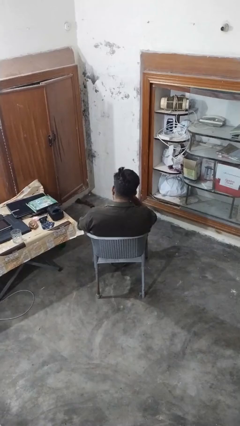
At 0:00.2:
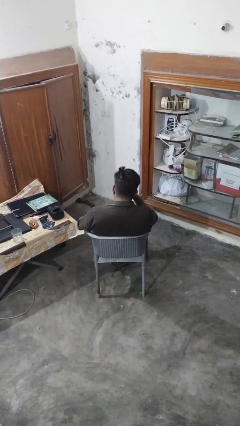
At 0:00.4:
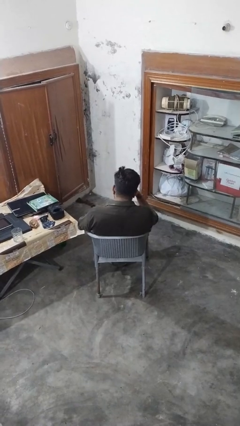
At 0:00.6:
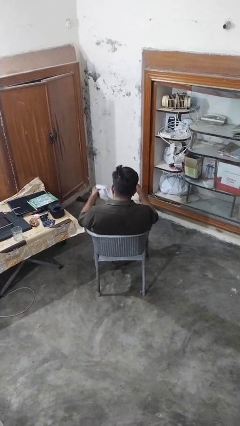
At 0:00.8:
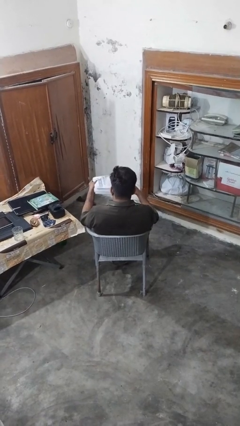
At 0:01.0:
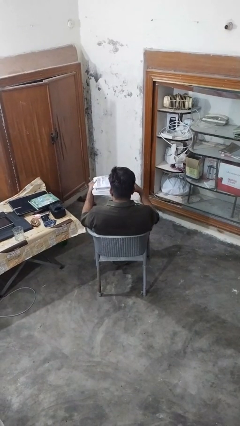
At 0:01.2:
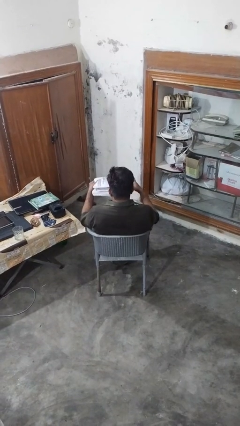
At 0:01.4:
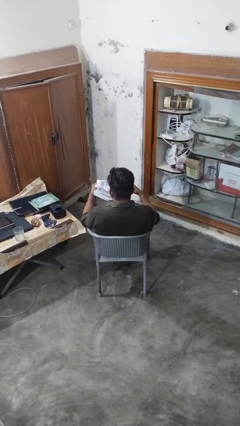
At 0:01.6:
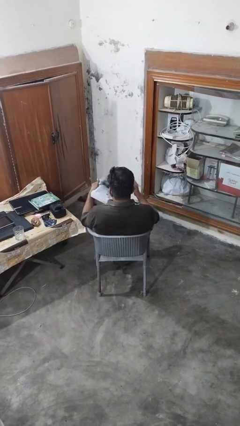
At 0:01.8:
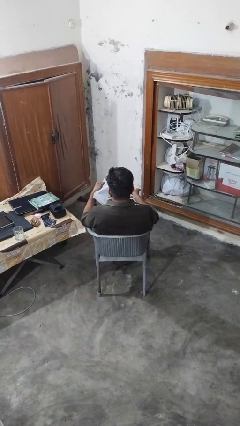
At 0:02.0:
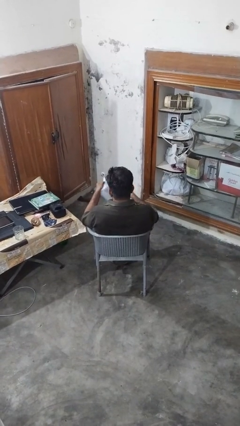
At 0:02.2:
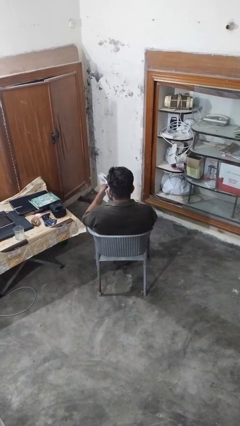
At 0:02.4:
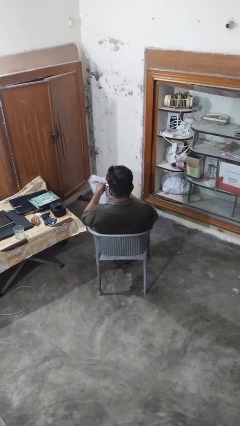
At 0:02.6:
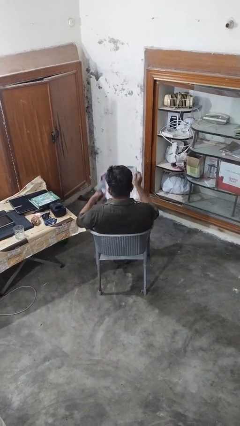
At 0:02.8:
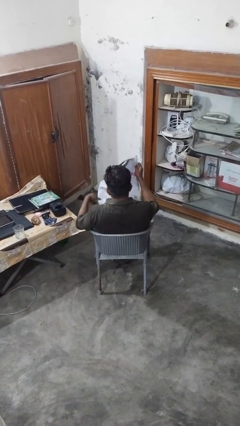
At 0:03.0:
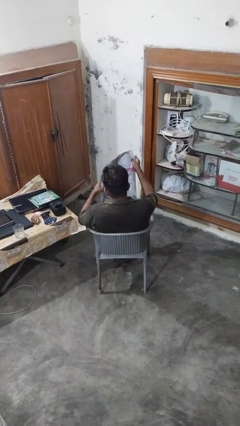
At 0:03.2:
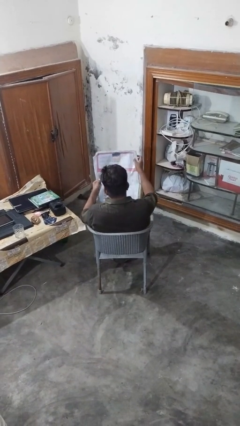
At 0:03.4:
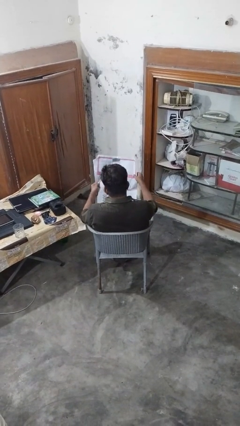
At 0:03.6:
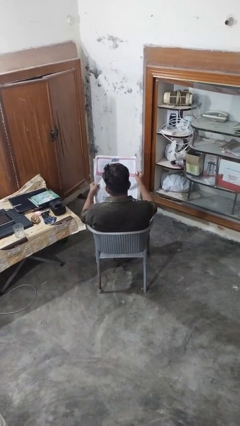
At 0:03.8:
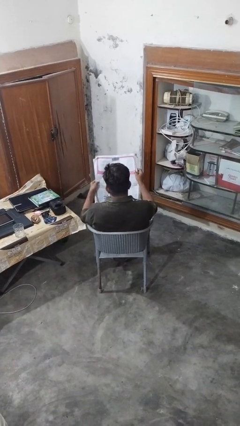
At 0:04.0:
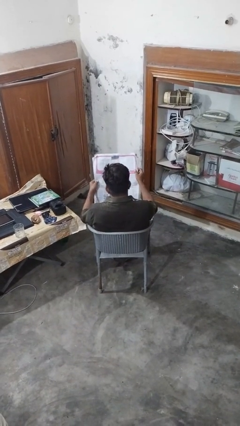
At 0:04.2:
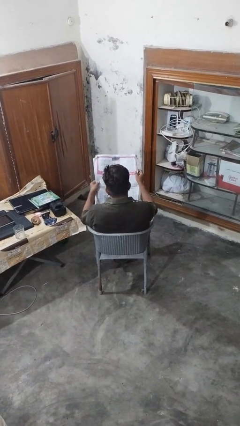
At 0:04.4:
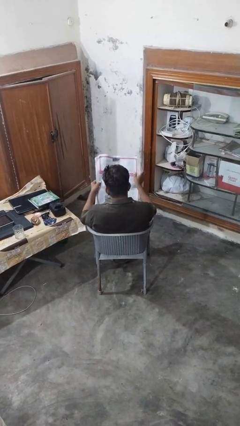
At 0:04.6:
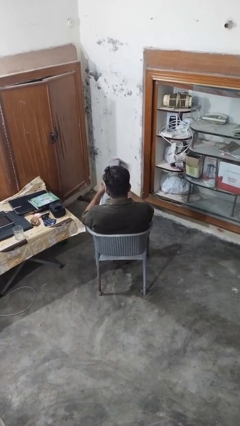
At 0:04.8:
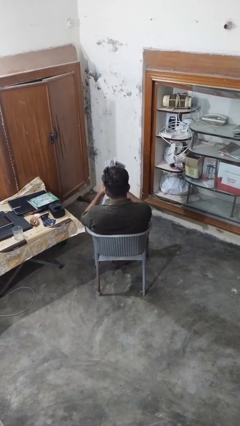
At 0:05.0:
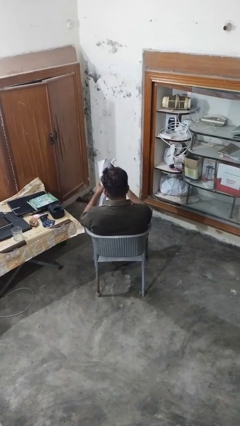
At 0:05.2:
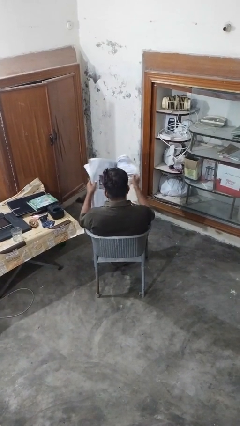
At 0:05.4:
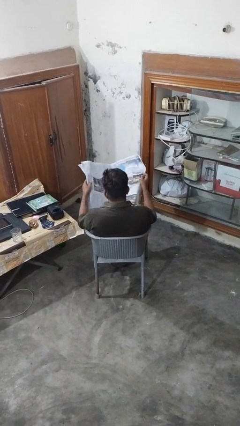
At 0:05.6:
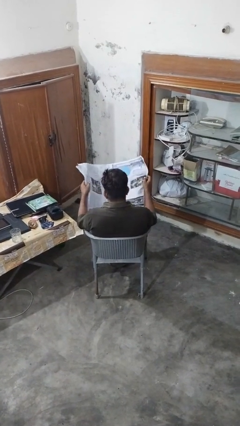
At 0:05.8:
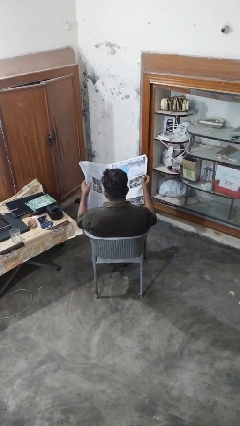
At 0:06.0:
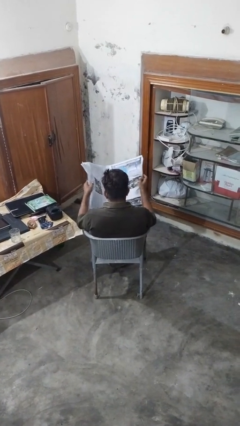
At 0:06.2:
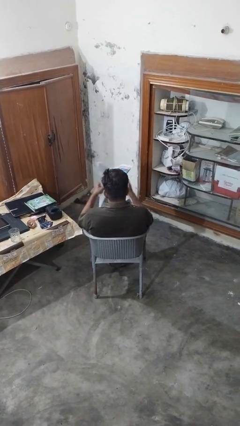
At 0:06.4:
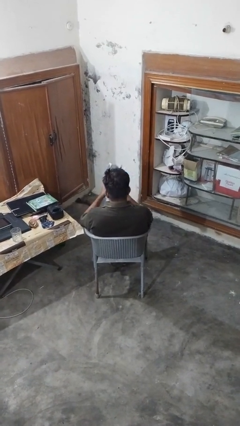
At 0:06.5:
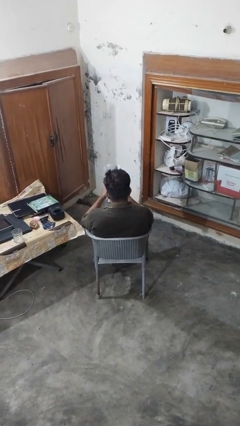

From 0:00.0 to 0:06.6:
person reads newspaper

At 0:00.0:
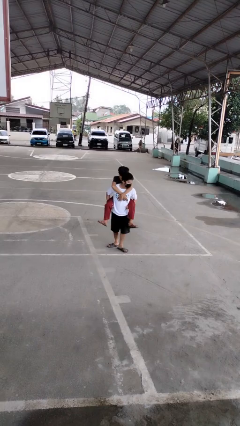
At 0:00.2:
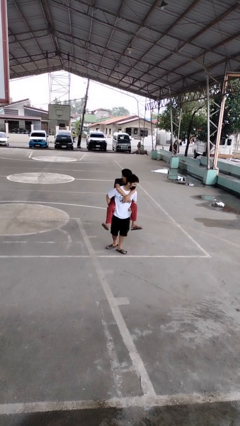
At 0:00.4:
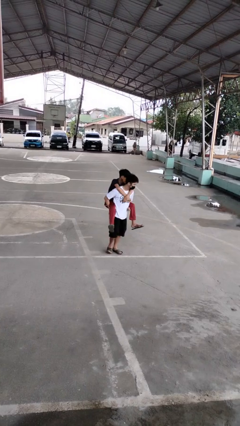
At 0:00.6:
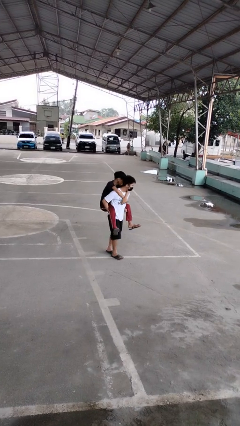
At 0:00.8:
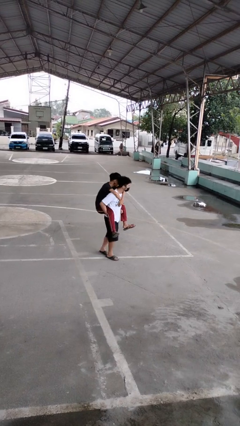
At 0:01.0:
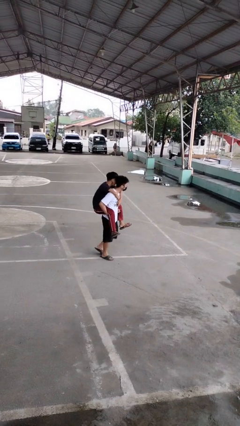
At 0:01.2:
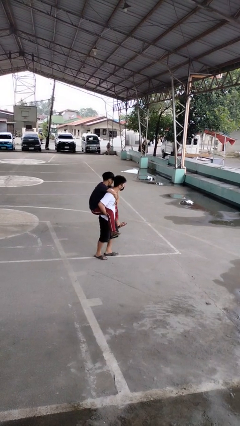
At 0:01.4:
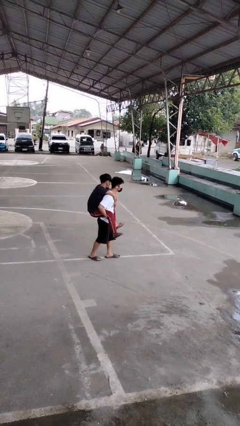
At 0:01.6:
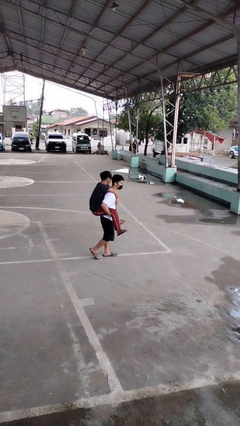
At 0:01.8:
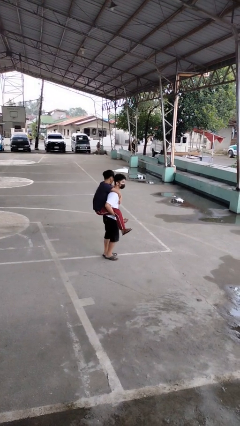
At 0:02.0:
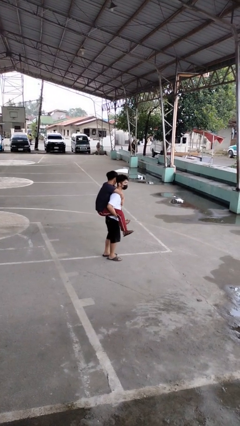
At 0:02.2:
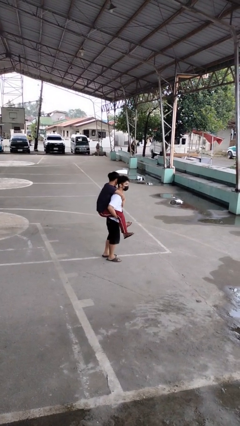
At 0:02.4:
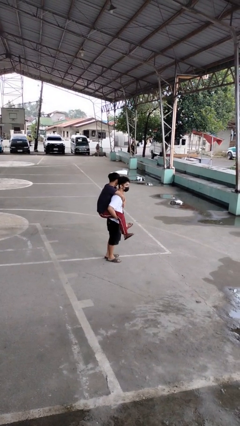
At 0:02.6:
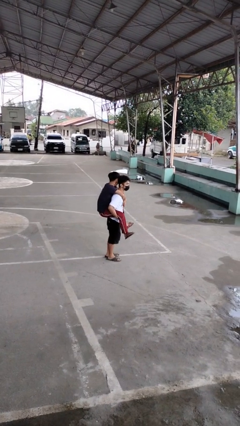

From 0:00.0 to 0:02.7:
person carries person on back

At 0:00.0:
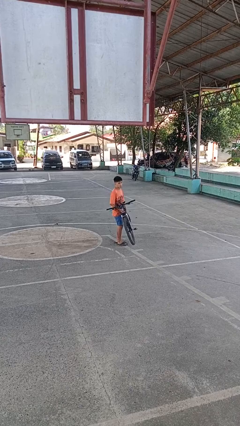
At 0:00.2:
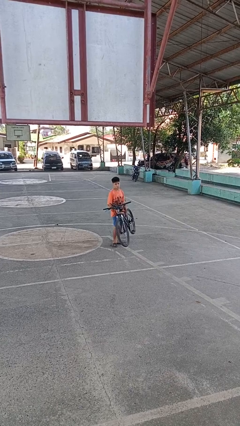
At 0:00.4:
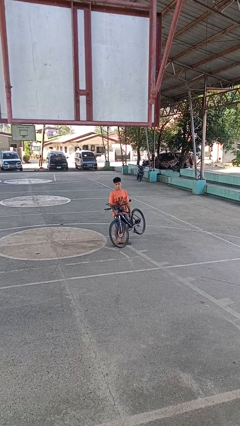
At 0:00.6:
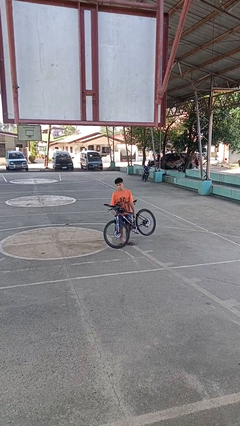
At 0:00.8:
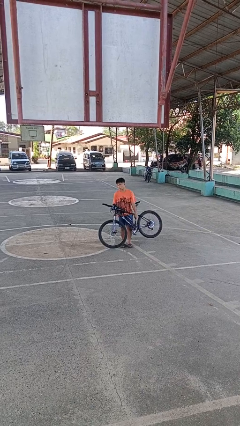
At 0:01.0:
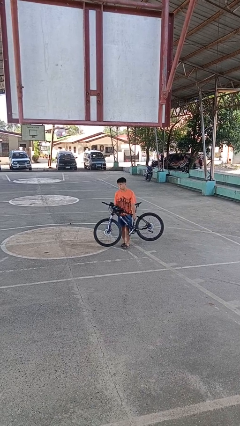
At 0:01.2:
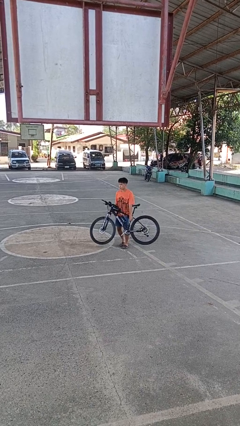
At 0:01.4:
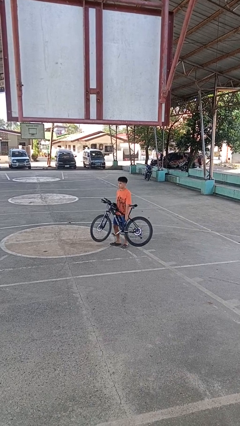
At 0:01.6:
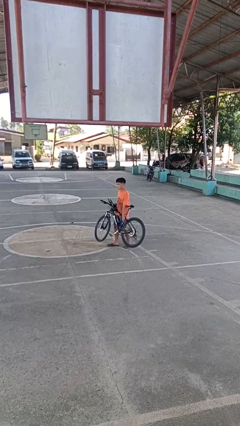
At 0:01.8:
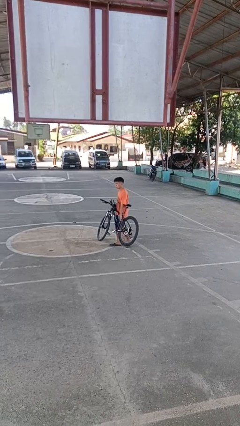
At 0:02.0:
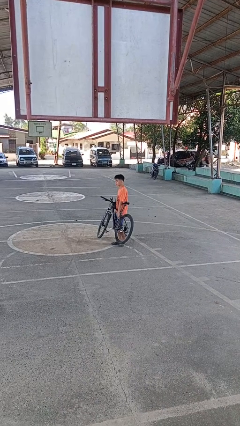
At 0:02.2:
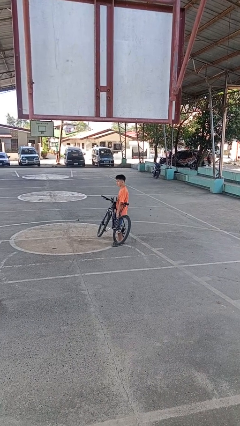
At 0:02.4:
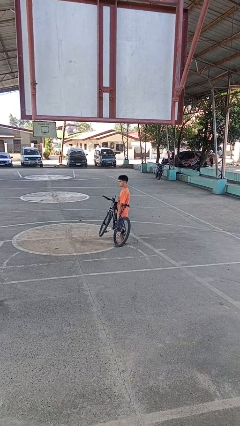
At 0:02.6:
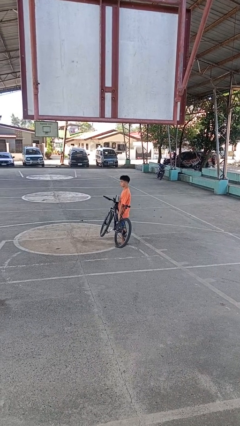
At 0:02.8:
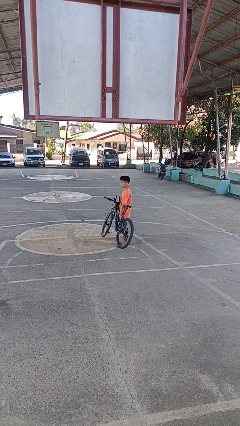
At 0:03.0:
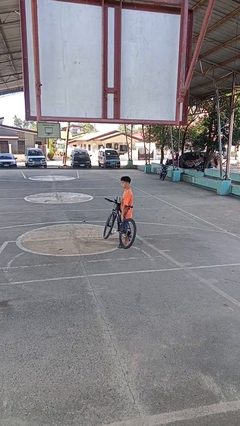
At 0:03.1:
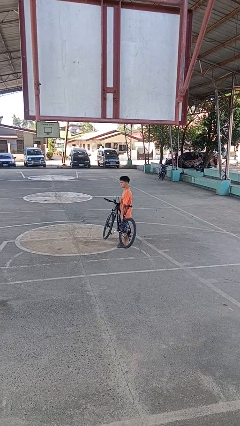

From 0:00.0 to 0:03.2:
person carries bicycle

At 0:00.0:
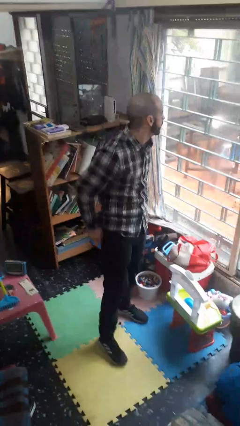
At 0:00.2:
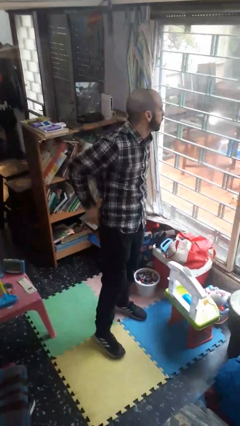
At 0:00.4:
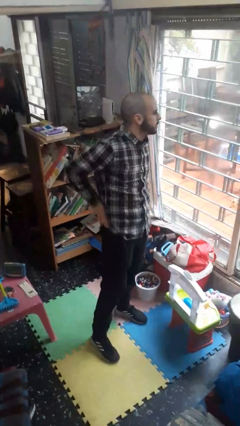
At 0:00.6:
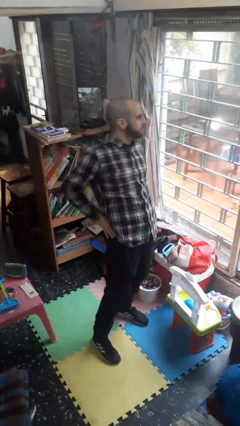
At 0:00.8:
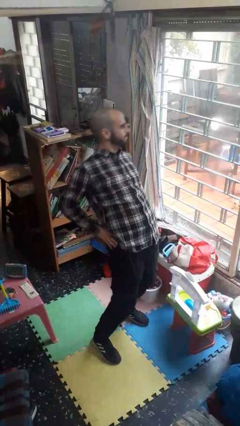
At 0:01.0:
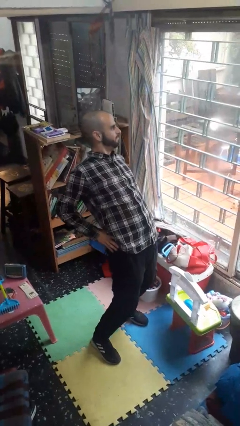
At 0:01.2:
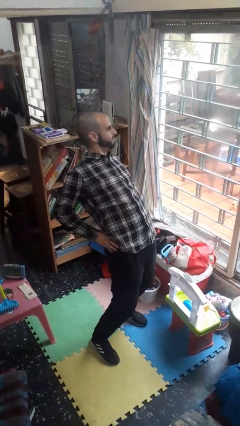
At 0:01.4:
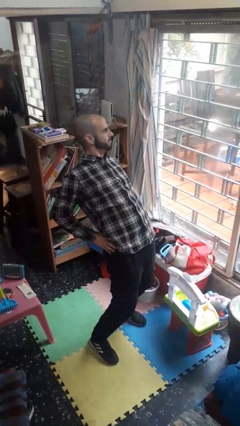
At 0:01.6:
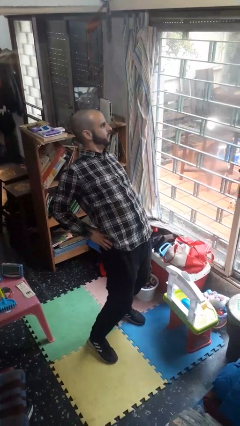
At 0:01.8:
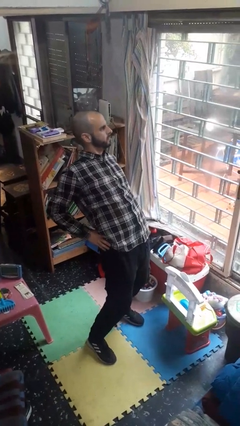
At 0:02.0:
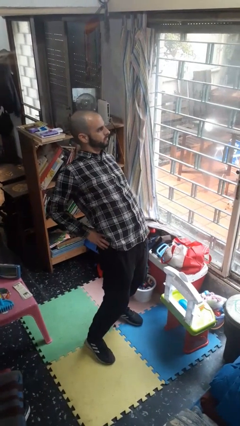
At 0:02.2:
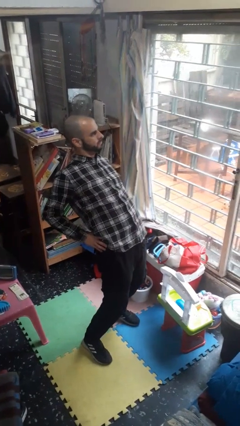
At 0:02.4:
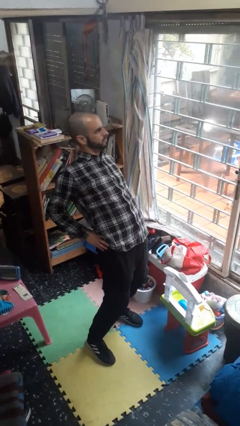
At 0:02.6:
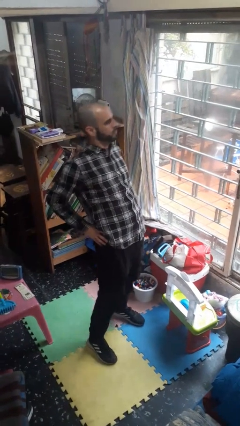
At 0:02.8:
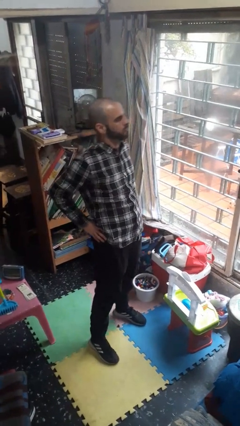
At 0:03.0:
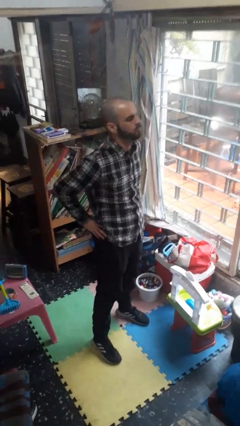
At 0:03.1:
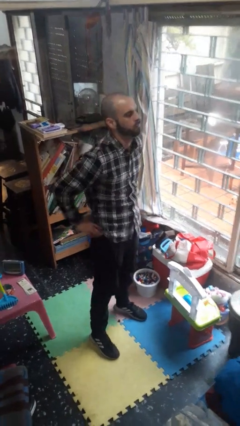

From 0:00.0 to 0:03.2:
person stretches back

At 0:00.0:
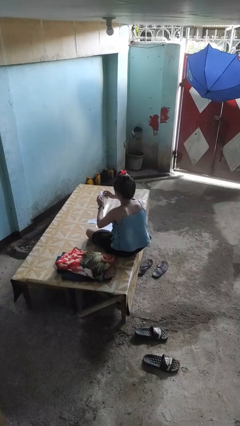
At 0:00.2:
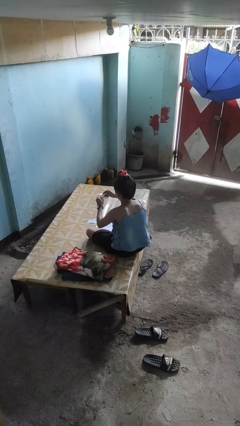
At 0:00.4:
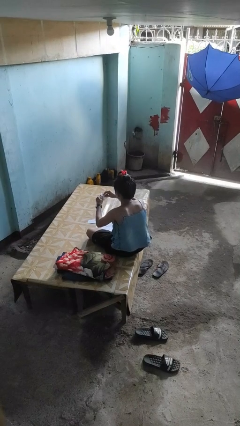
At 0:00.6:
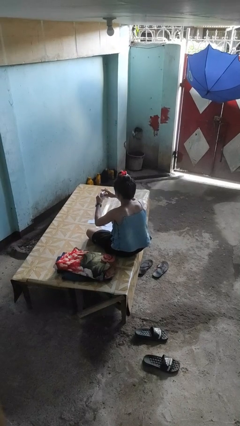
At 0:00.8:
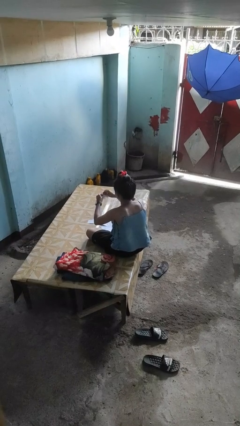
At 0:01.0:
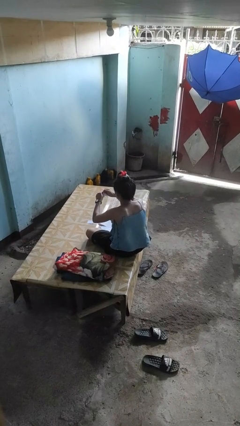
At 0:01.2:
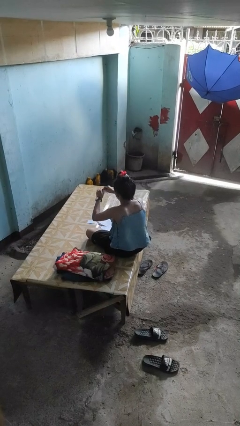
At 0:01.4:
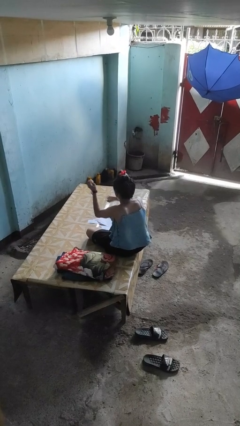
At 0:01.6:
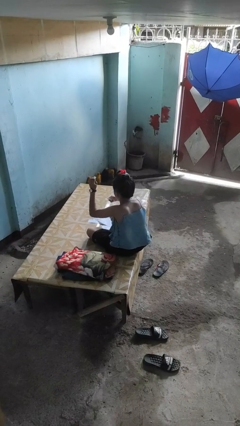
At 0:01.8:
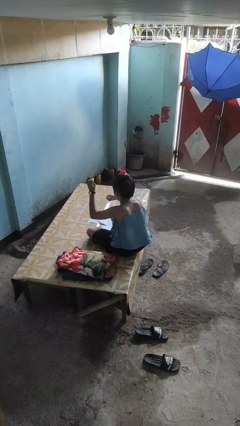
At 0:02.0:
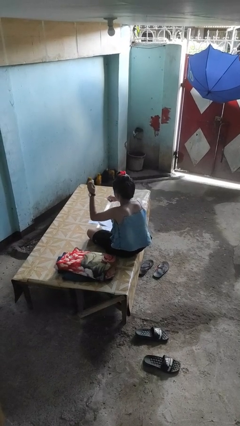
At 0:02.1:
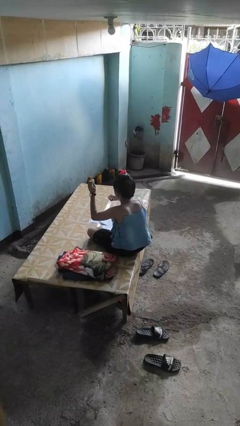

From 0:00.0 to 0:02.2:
person tears paper
